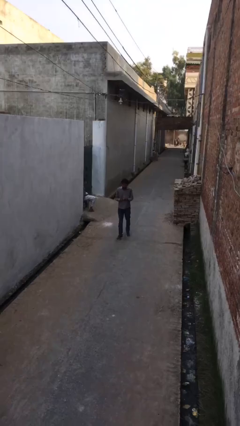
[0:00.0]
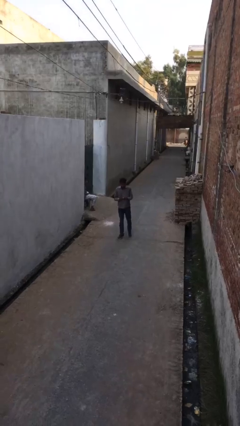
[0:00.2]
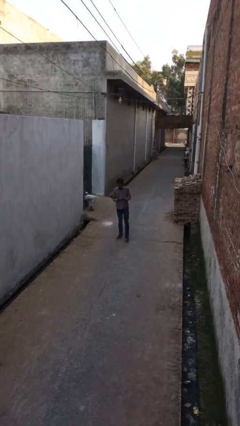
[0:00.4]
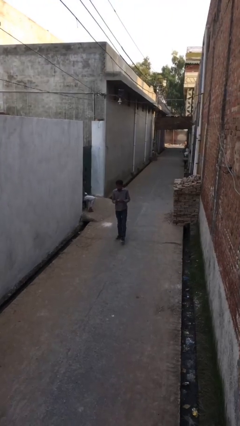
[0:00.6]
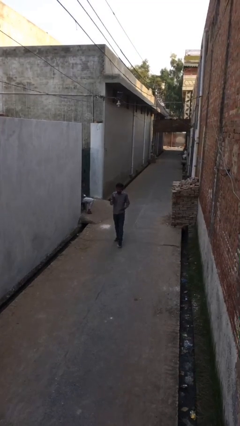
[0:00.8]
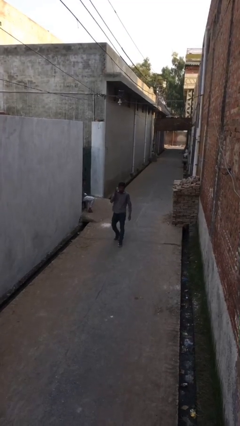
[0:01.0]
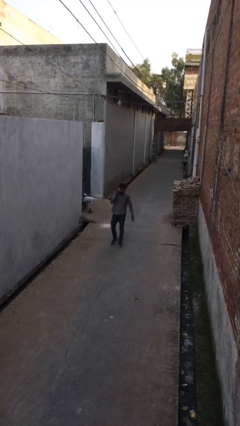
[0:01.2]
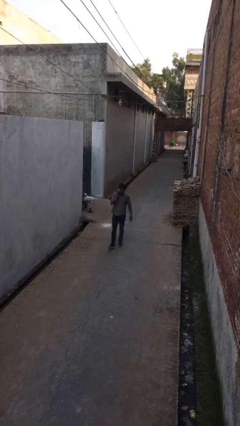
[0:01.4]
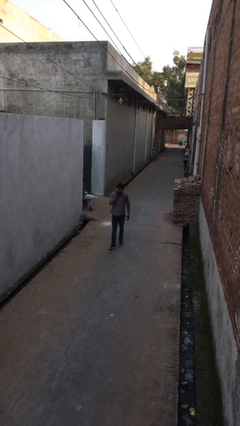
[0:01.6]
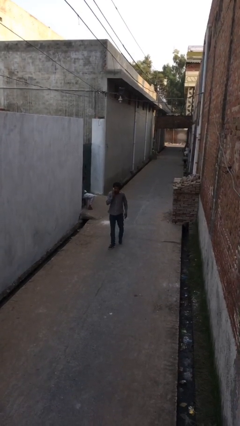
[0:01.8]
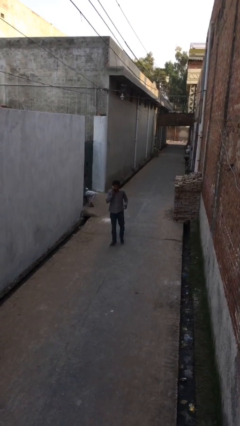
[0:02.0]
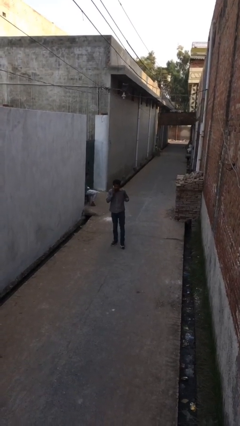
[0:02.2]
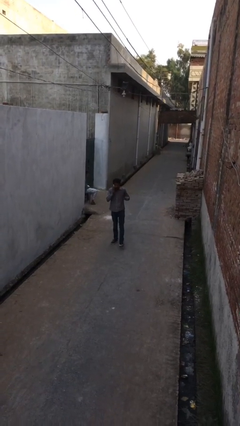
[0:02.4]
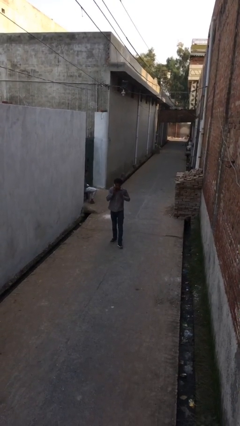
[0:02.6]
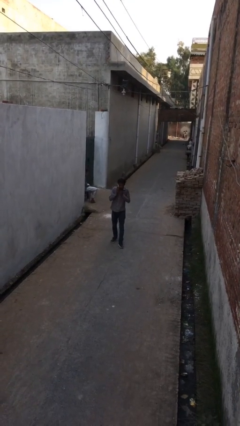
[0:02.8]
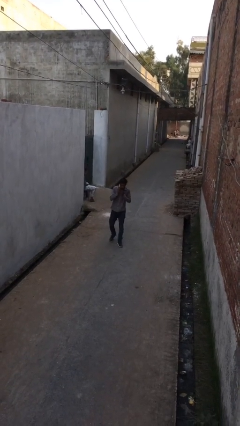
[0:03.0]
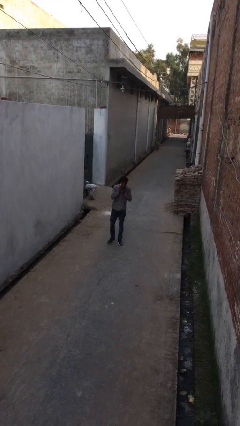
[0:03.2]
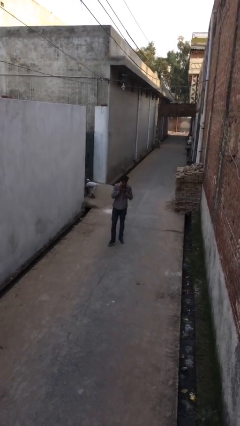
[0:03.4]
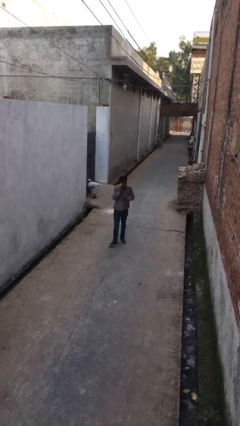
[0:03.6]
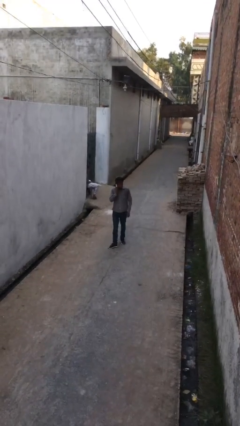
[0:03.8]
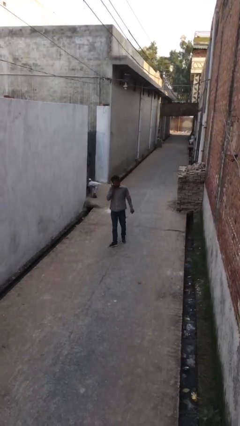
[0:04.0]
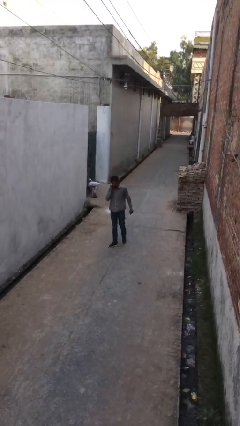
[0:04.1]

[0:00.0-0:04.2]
person talks on phone

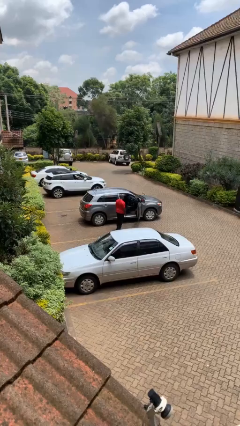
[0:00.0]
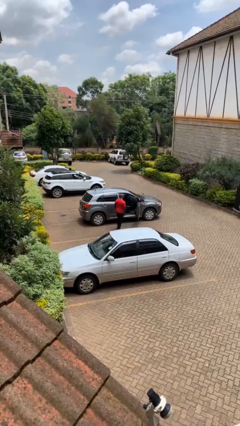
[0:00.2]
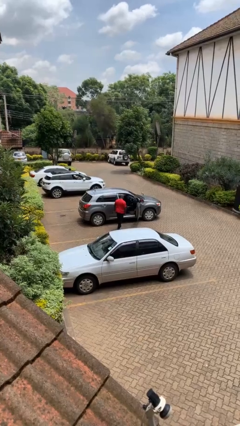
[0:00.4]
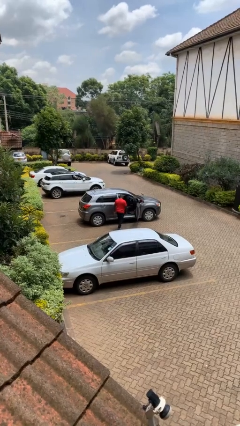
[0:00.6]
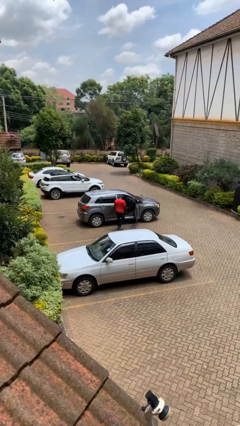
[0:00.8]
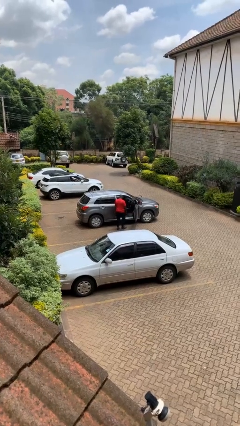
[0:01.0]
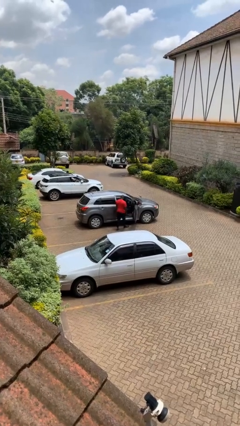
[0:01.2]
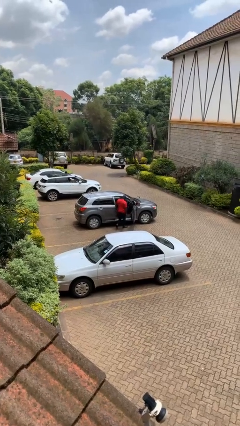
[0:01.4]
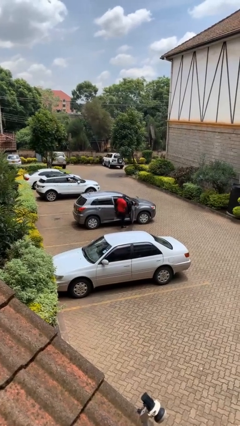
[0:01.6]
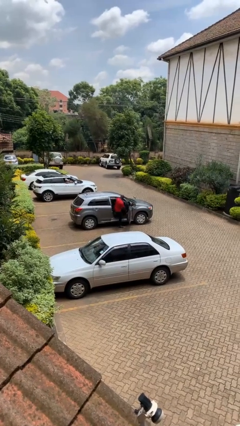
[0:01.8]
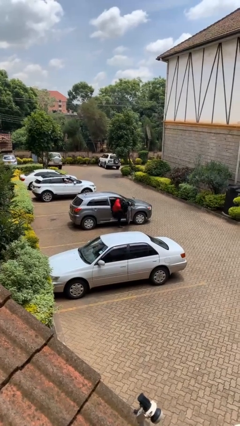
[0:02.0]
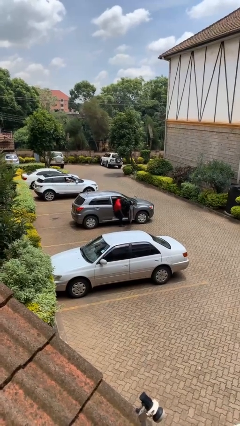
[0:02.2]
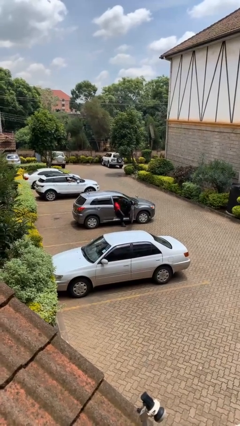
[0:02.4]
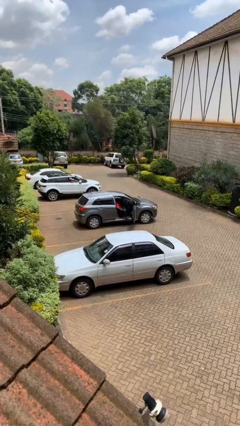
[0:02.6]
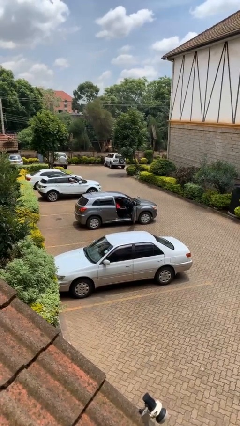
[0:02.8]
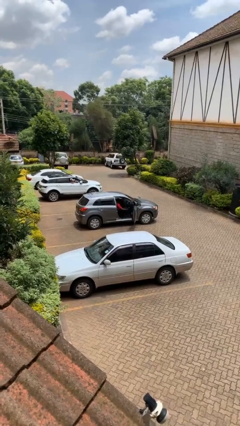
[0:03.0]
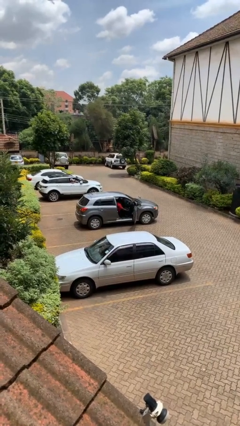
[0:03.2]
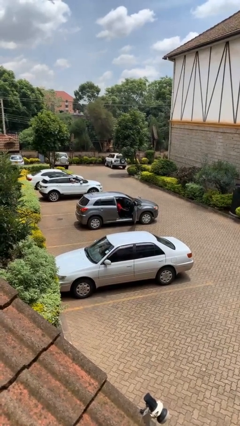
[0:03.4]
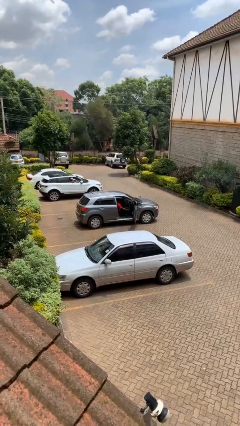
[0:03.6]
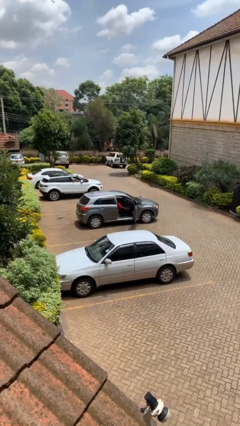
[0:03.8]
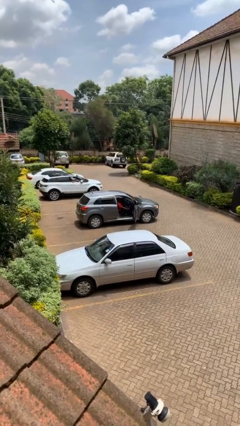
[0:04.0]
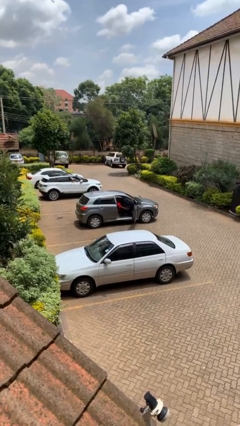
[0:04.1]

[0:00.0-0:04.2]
person enters car

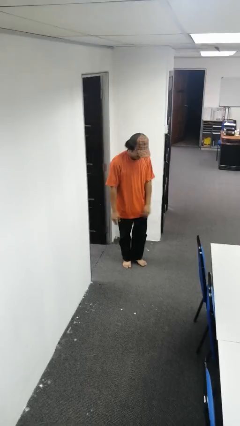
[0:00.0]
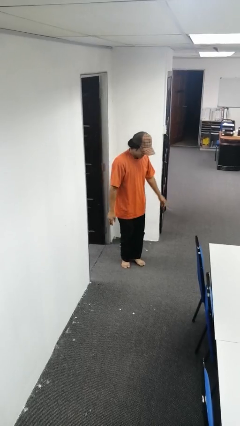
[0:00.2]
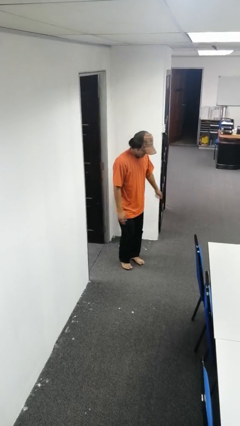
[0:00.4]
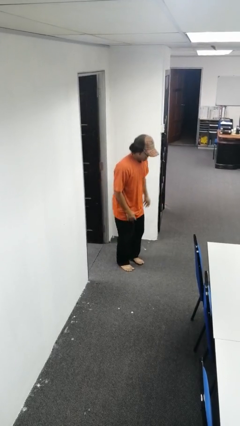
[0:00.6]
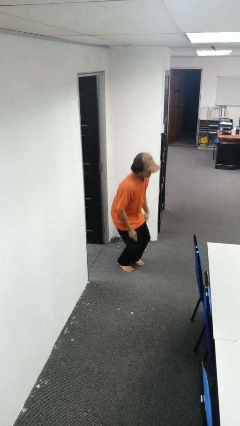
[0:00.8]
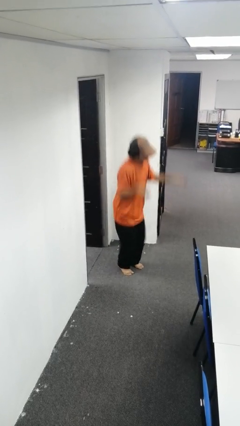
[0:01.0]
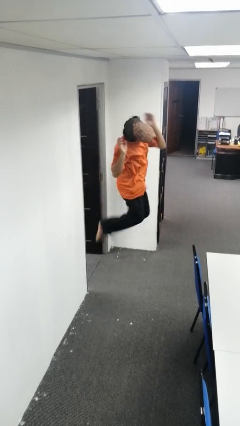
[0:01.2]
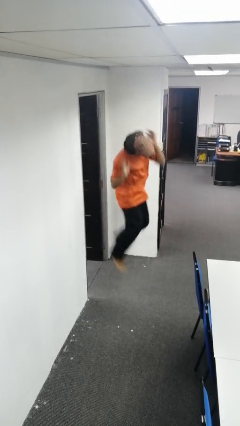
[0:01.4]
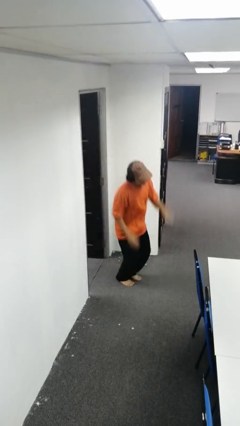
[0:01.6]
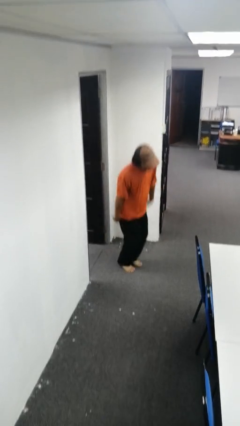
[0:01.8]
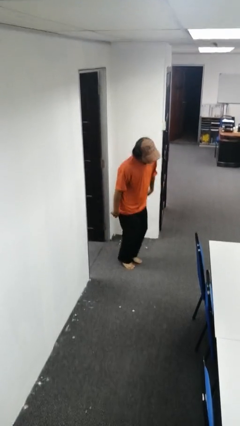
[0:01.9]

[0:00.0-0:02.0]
person jumps

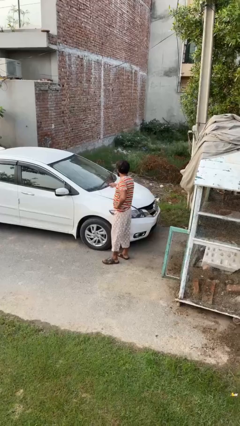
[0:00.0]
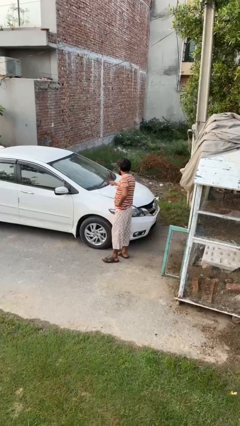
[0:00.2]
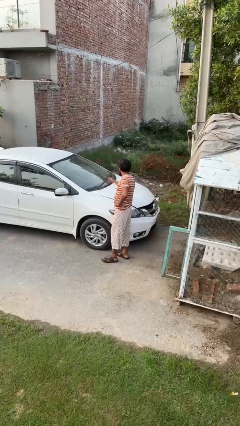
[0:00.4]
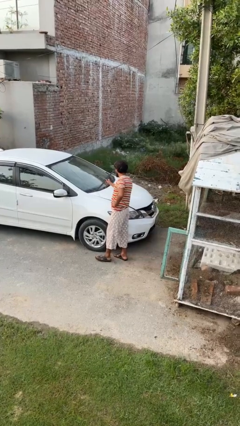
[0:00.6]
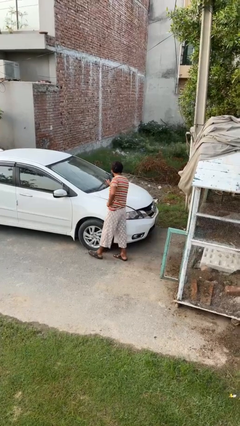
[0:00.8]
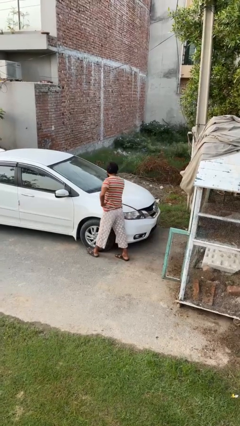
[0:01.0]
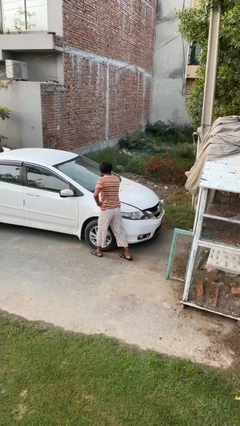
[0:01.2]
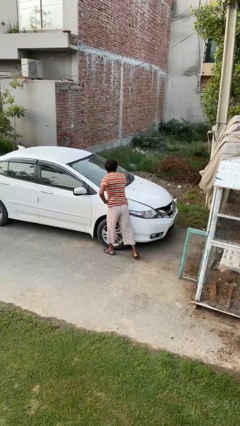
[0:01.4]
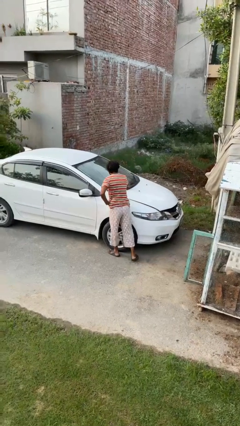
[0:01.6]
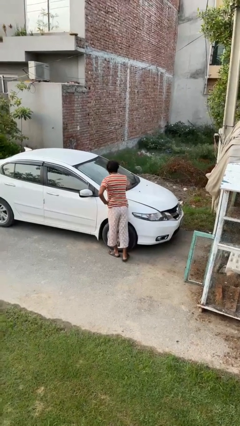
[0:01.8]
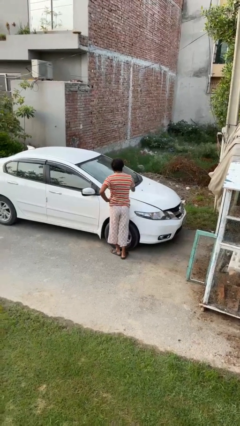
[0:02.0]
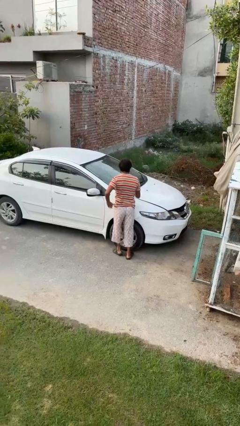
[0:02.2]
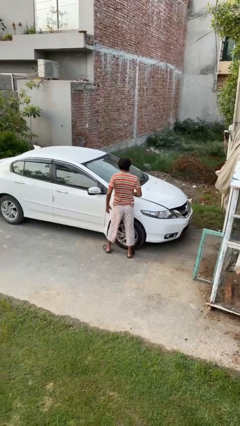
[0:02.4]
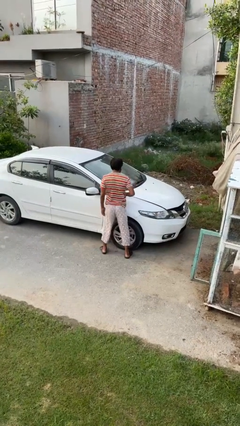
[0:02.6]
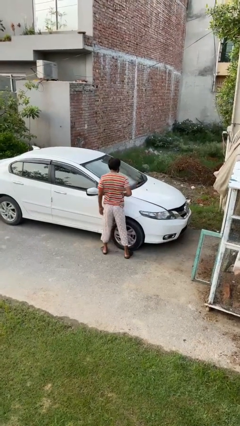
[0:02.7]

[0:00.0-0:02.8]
person flips down car wipers

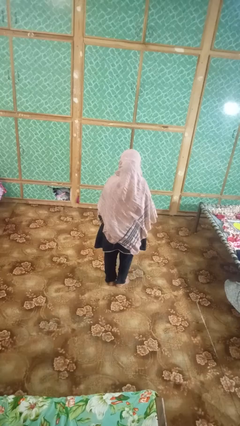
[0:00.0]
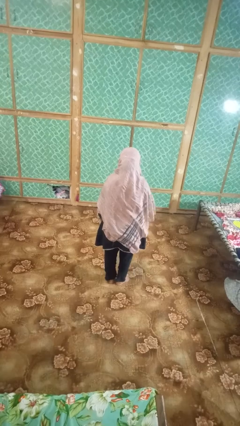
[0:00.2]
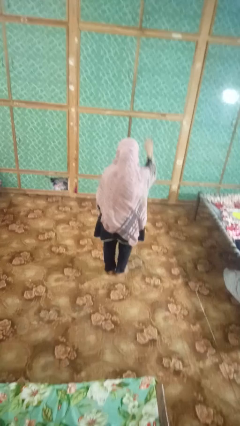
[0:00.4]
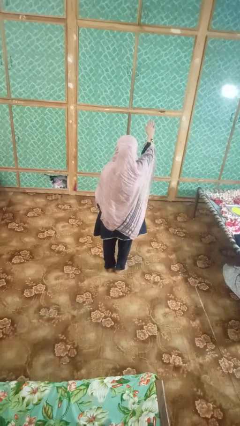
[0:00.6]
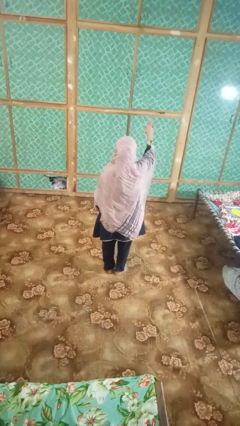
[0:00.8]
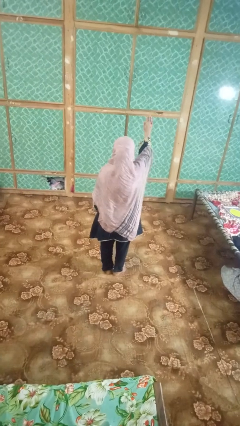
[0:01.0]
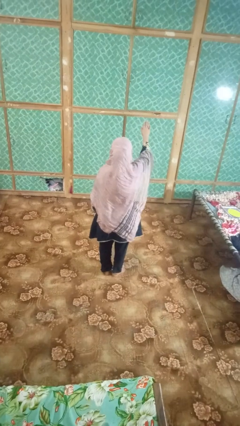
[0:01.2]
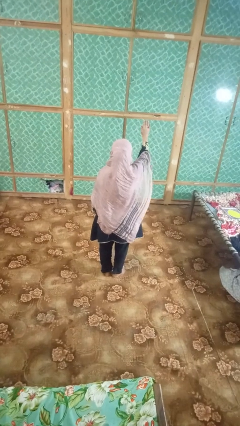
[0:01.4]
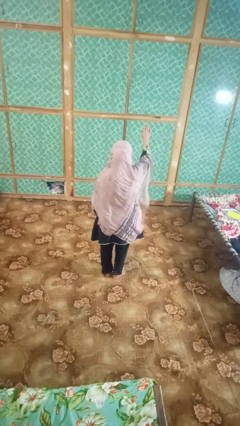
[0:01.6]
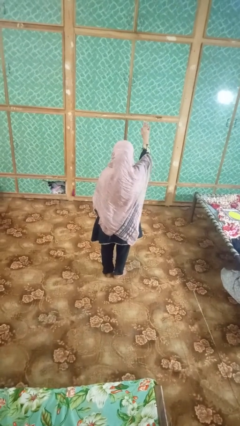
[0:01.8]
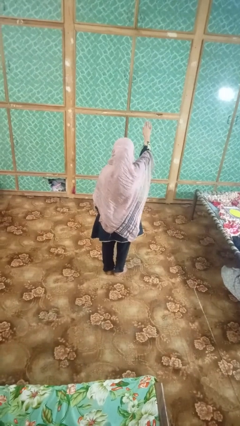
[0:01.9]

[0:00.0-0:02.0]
person gestures stop

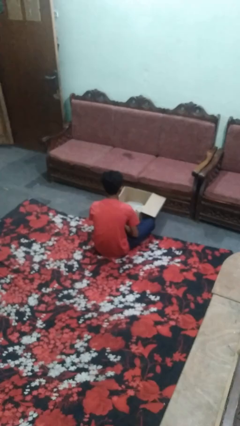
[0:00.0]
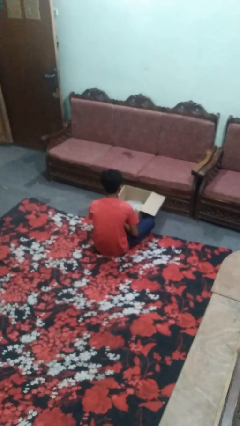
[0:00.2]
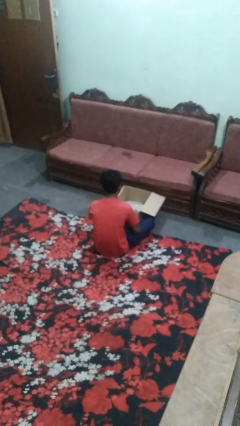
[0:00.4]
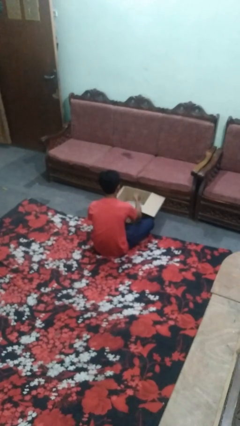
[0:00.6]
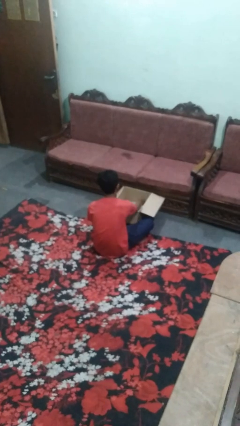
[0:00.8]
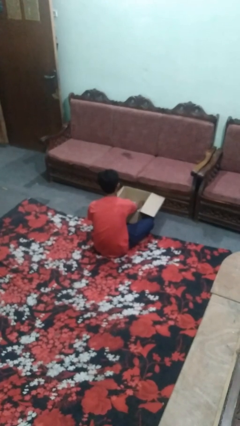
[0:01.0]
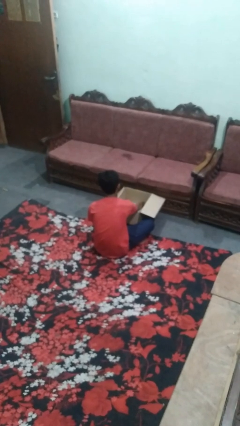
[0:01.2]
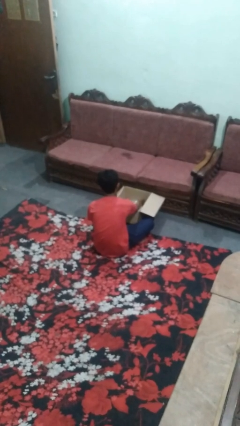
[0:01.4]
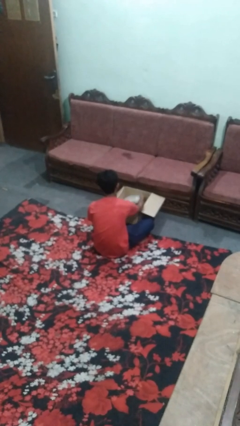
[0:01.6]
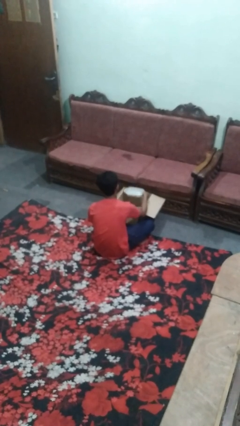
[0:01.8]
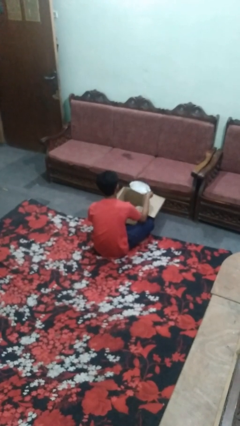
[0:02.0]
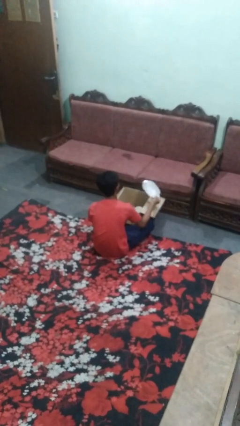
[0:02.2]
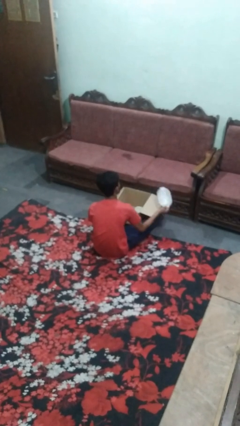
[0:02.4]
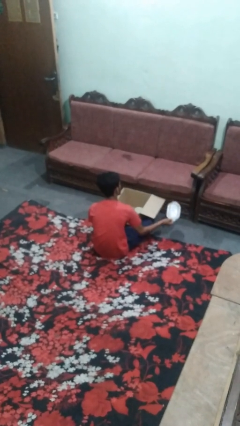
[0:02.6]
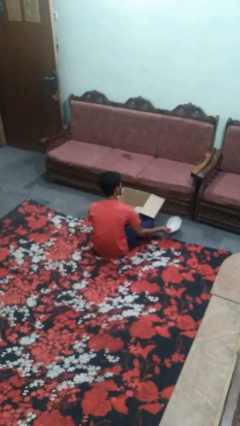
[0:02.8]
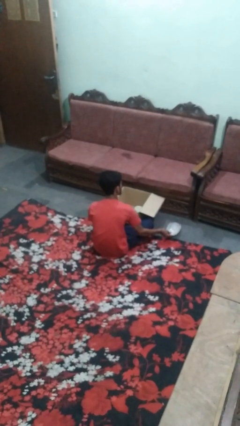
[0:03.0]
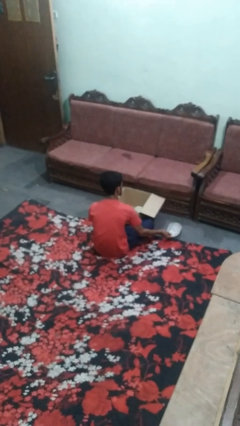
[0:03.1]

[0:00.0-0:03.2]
person takes object from box
